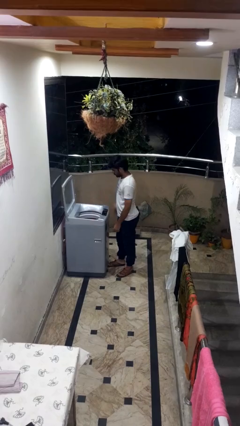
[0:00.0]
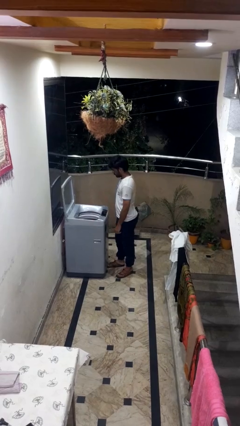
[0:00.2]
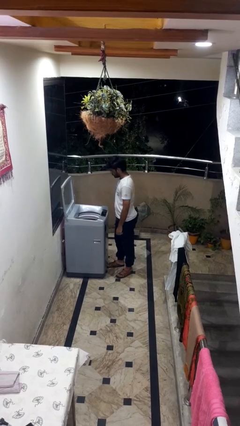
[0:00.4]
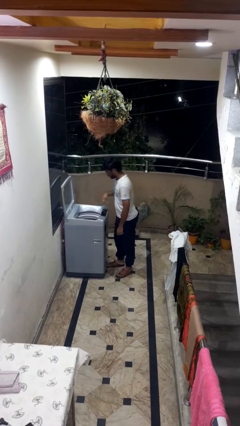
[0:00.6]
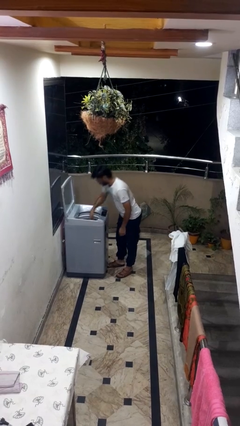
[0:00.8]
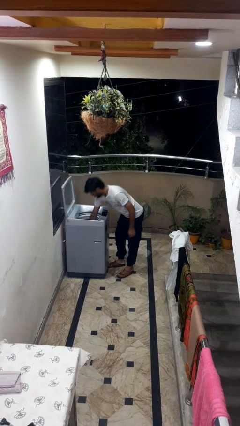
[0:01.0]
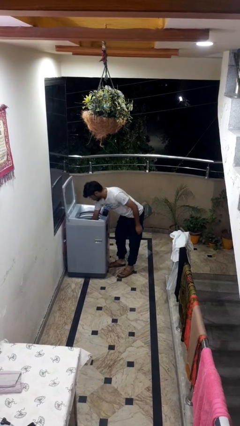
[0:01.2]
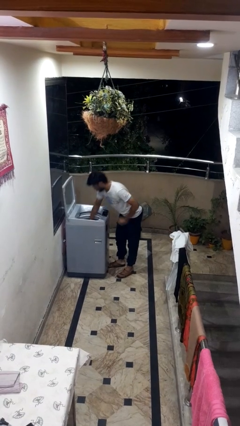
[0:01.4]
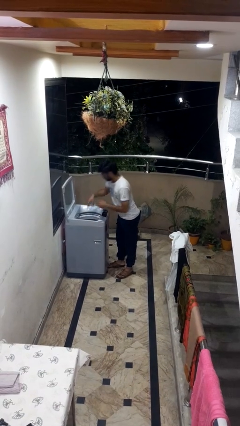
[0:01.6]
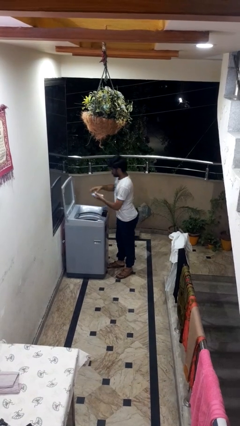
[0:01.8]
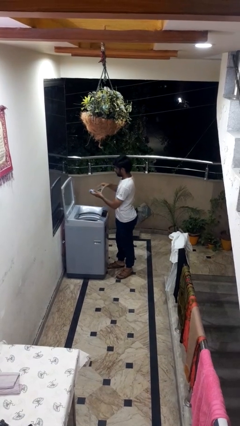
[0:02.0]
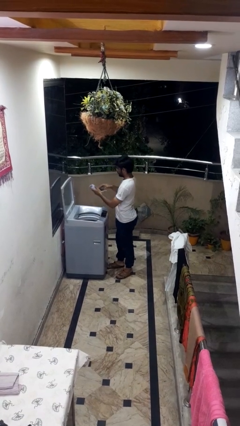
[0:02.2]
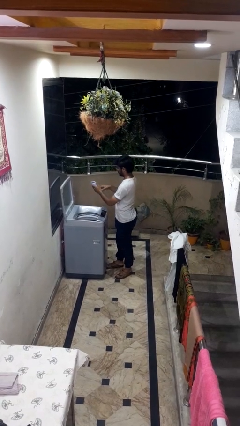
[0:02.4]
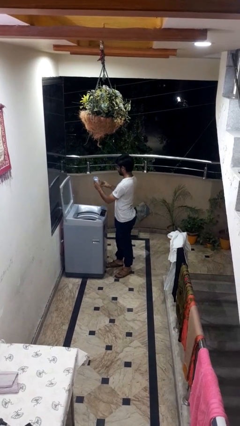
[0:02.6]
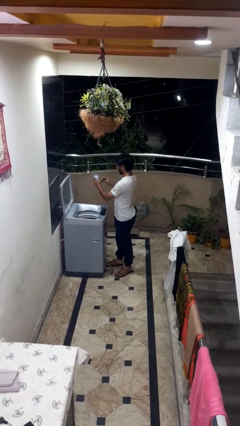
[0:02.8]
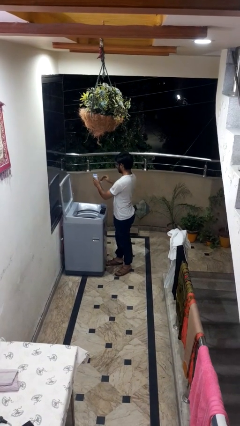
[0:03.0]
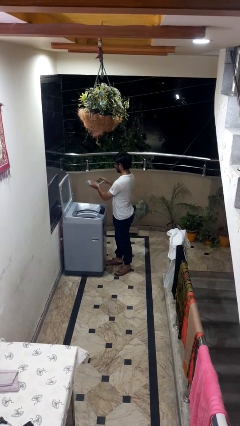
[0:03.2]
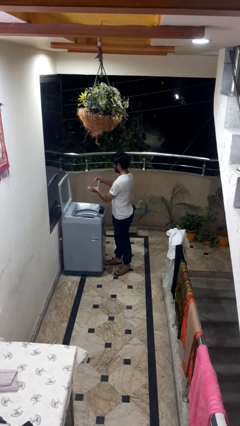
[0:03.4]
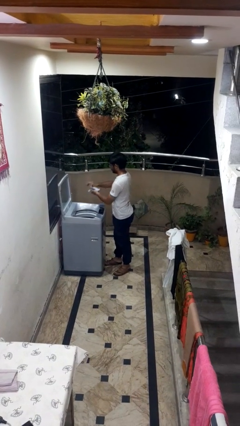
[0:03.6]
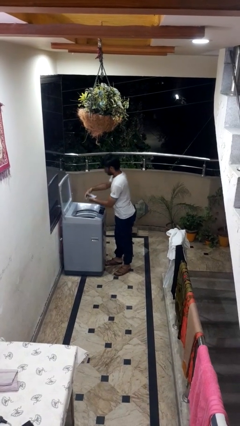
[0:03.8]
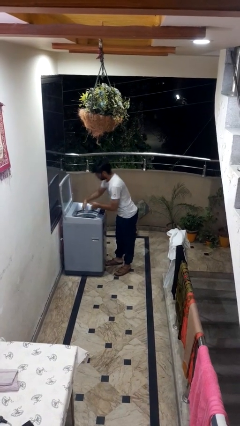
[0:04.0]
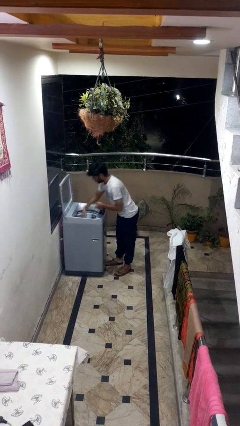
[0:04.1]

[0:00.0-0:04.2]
person cleans dryer lint trap

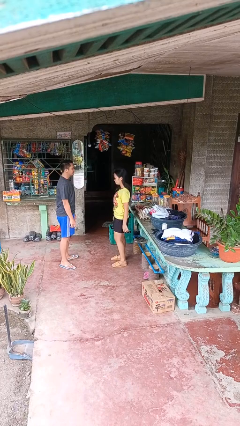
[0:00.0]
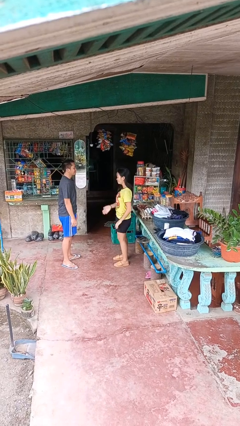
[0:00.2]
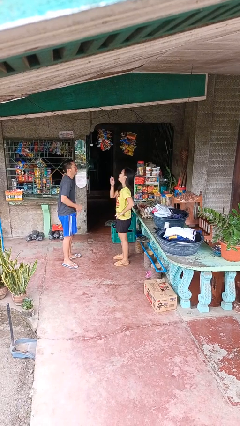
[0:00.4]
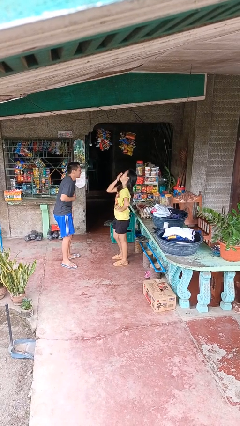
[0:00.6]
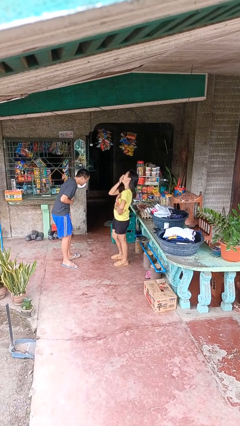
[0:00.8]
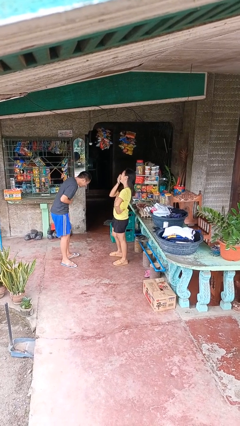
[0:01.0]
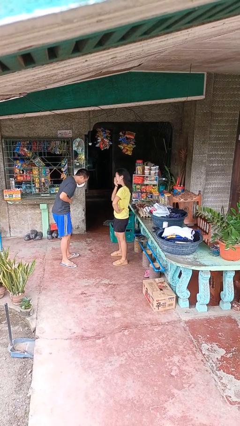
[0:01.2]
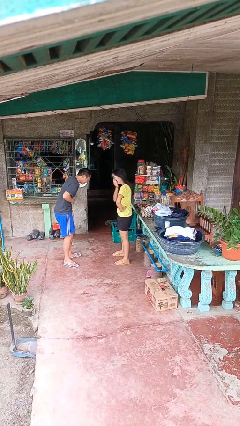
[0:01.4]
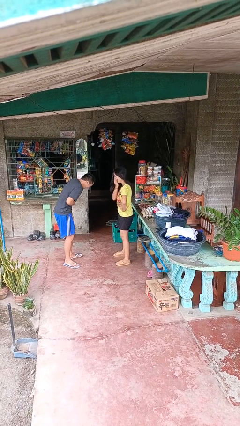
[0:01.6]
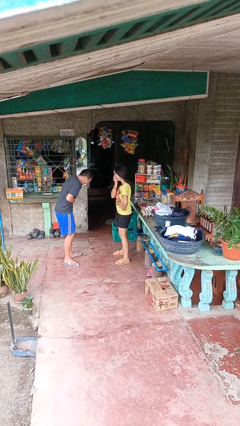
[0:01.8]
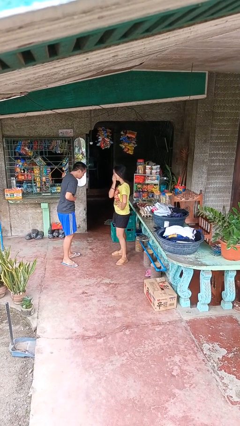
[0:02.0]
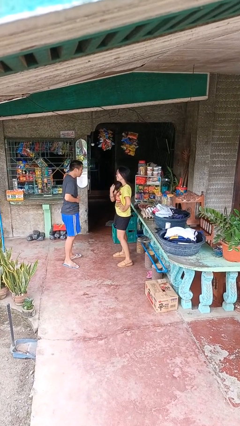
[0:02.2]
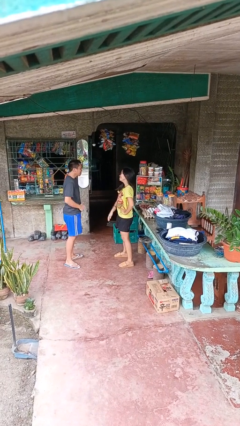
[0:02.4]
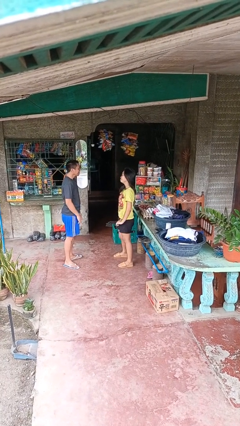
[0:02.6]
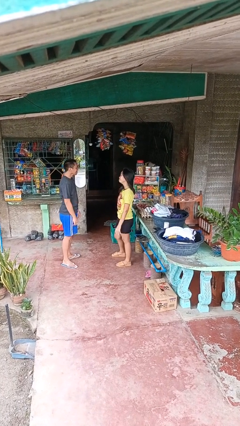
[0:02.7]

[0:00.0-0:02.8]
person laughs with person

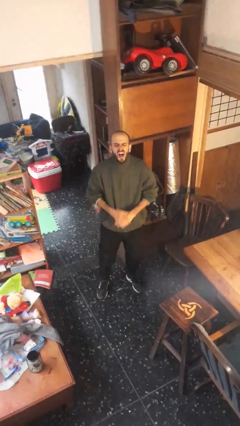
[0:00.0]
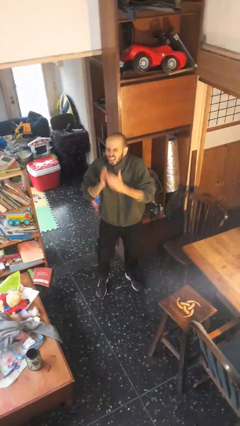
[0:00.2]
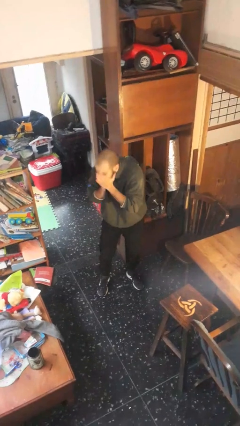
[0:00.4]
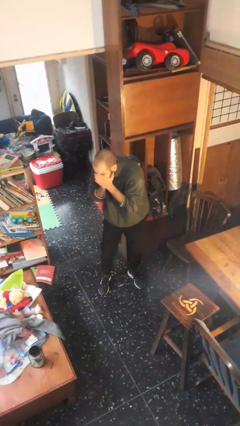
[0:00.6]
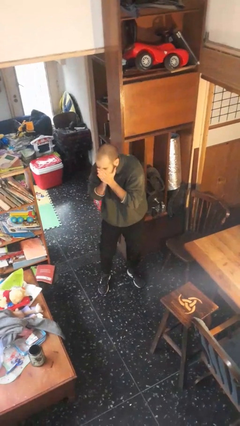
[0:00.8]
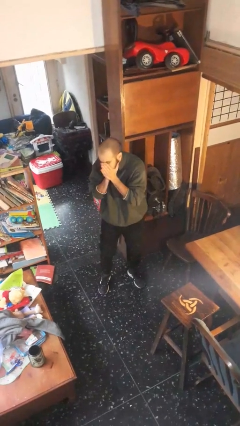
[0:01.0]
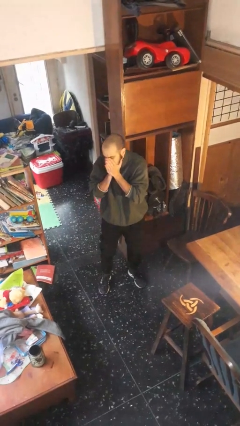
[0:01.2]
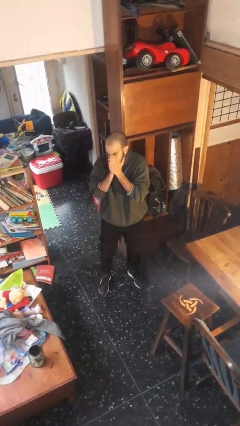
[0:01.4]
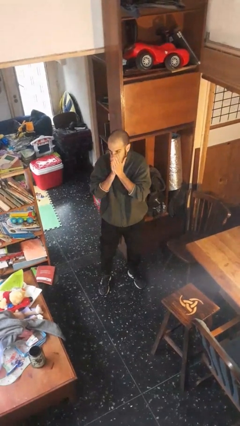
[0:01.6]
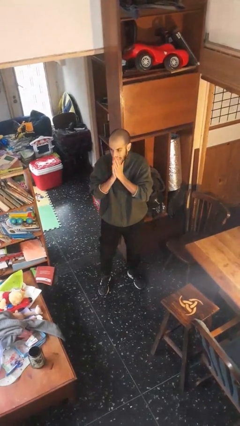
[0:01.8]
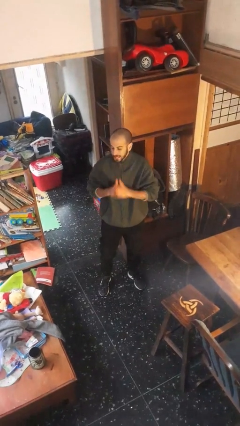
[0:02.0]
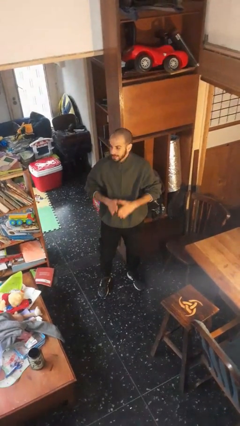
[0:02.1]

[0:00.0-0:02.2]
person sneezes into hand

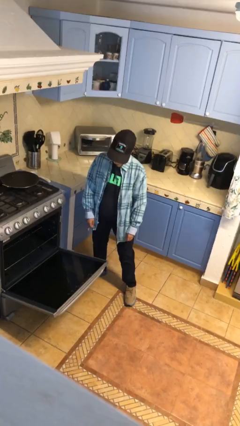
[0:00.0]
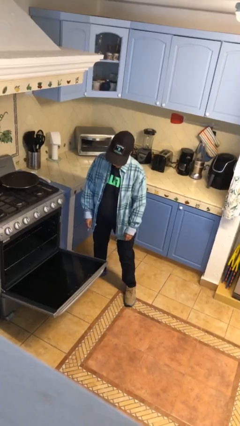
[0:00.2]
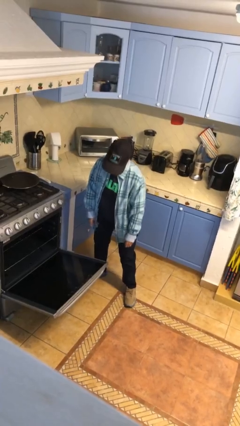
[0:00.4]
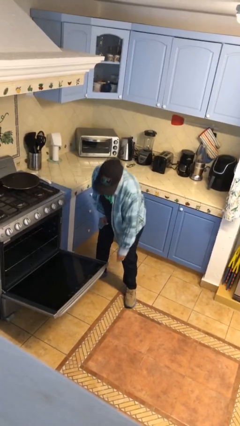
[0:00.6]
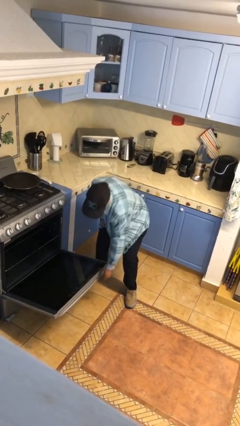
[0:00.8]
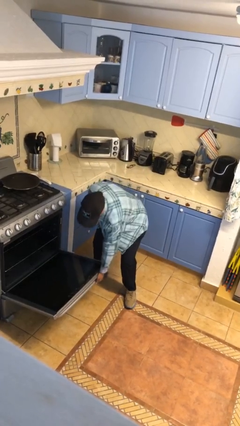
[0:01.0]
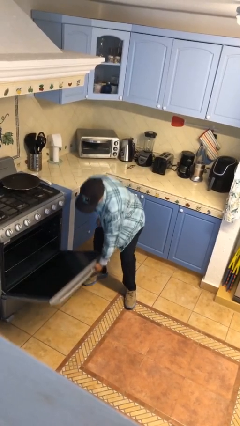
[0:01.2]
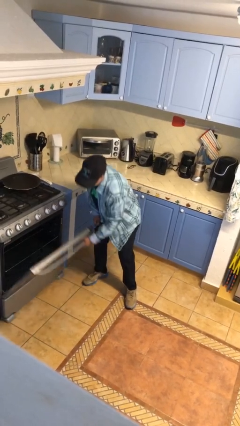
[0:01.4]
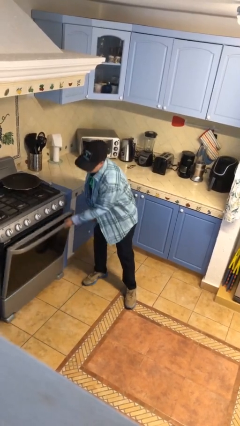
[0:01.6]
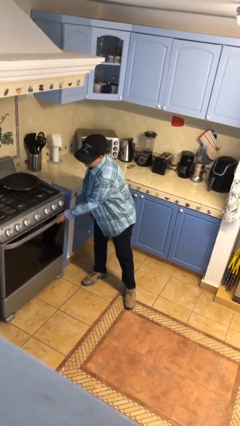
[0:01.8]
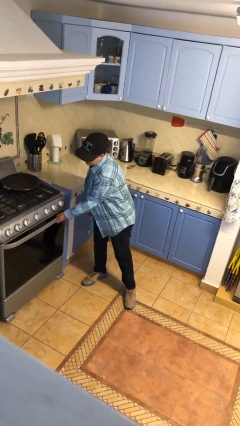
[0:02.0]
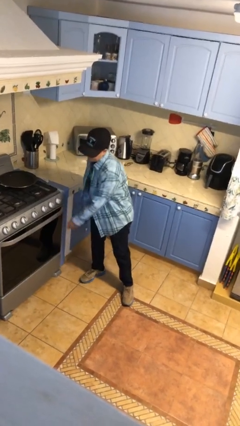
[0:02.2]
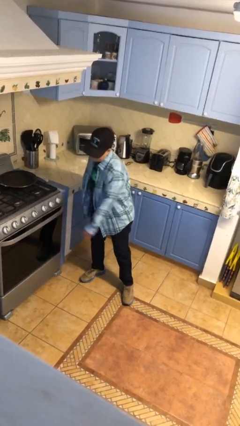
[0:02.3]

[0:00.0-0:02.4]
person closes oven door

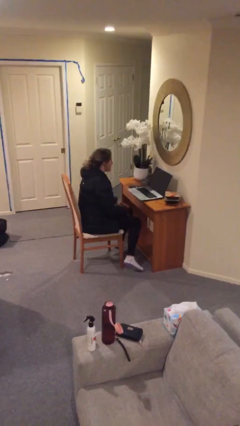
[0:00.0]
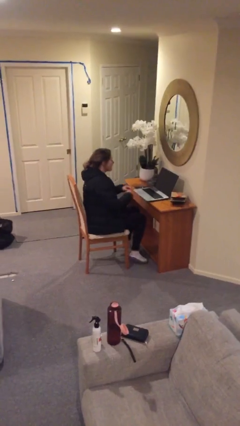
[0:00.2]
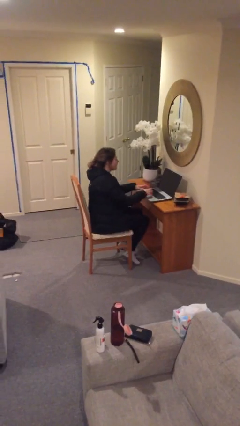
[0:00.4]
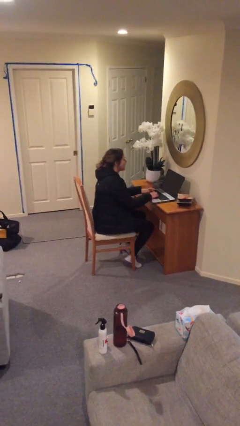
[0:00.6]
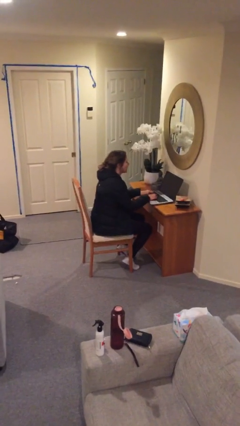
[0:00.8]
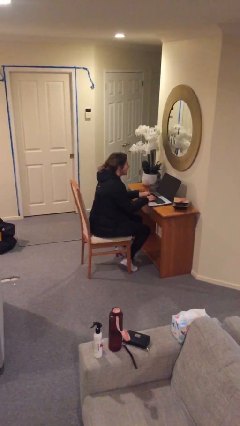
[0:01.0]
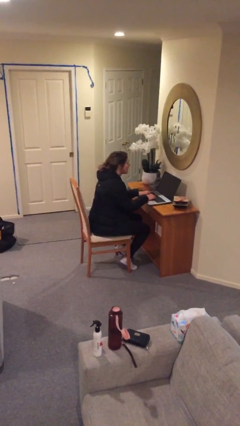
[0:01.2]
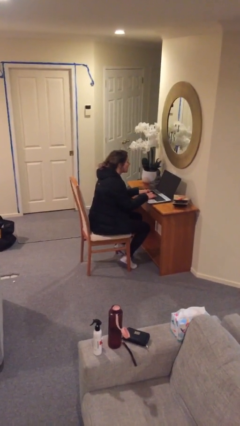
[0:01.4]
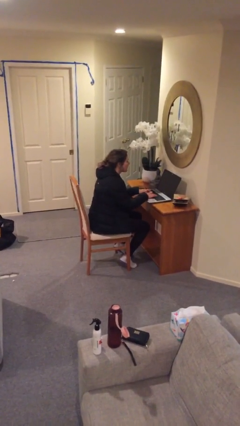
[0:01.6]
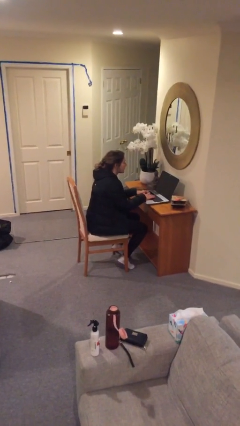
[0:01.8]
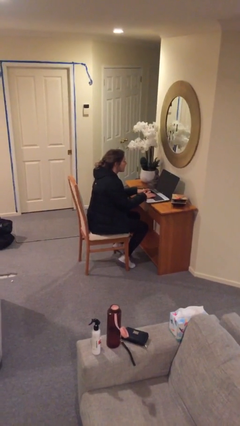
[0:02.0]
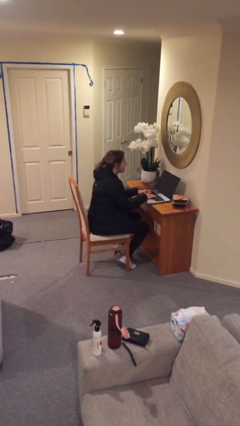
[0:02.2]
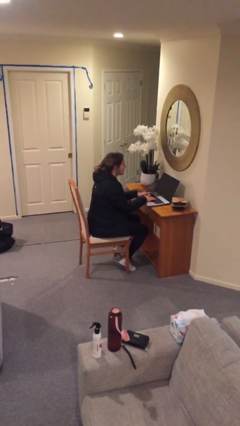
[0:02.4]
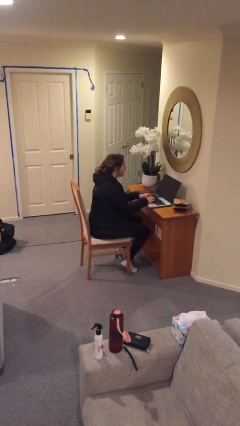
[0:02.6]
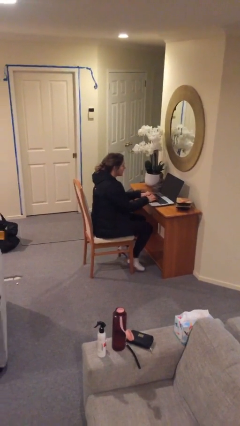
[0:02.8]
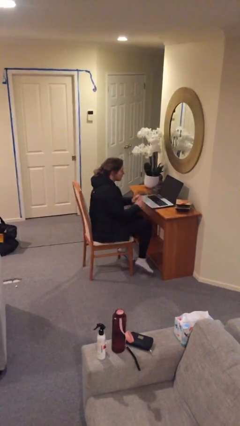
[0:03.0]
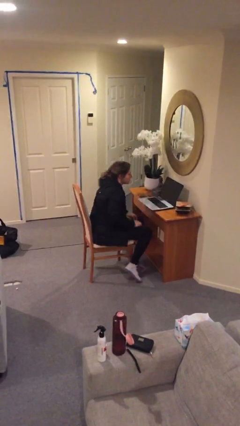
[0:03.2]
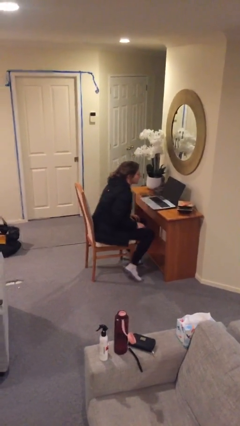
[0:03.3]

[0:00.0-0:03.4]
person interacts with laptop

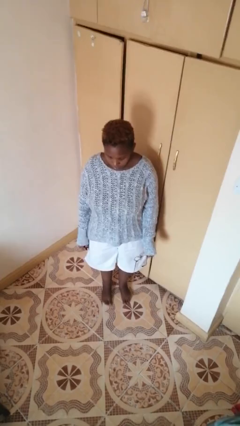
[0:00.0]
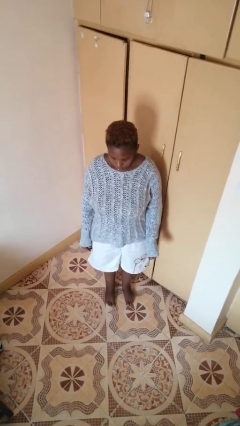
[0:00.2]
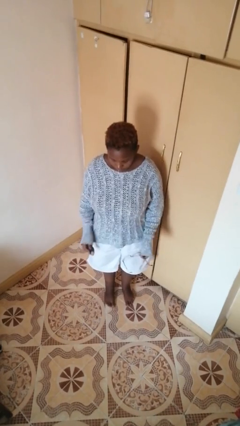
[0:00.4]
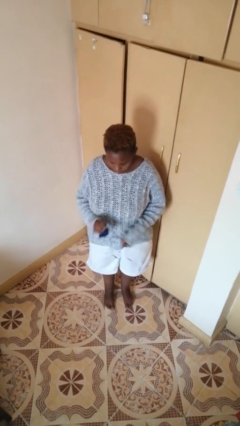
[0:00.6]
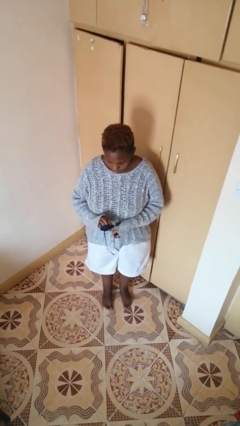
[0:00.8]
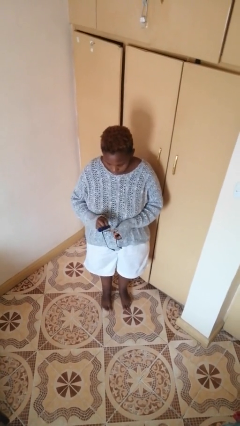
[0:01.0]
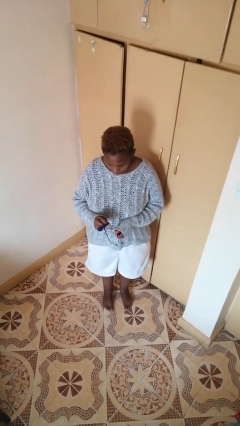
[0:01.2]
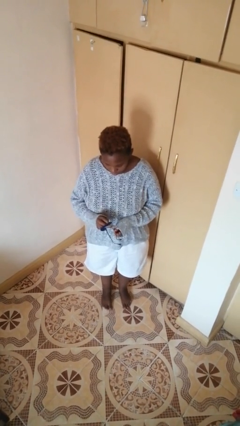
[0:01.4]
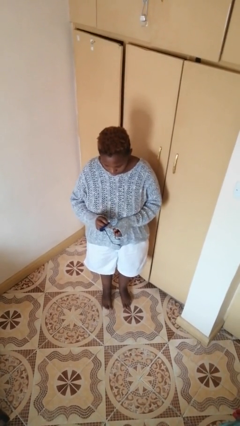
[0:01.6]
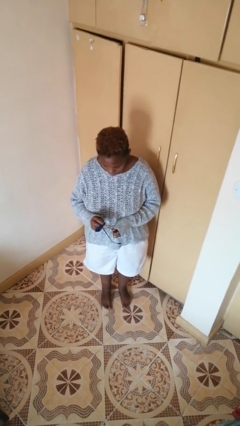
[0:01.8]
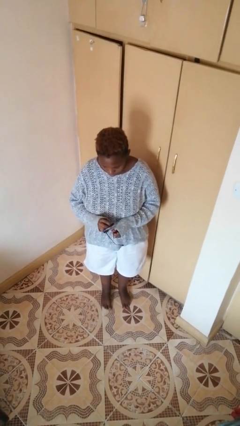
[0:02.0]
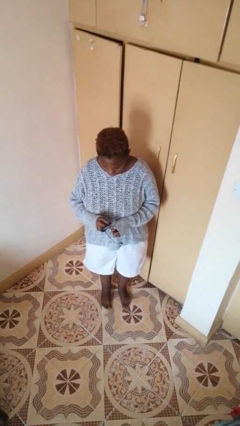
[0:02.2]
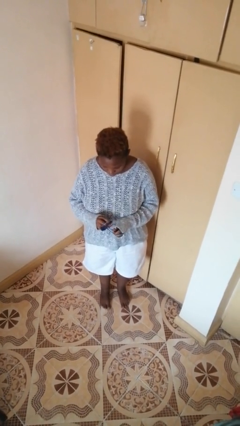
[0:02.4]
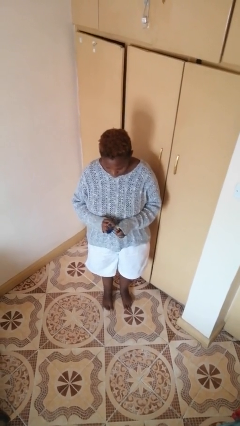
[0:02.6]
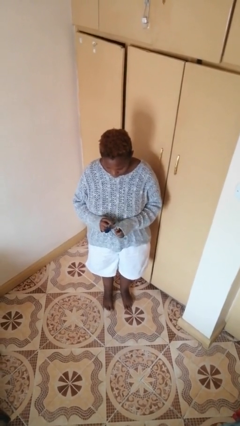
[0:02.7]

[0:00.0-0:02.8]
person cleans eyeglasses
